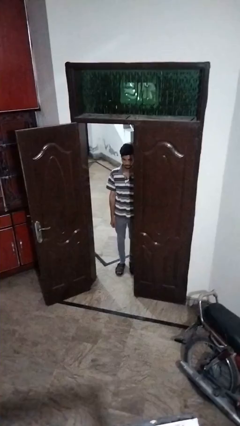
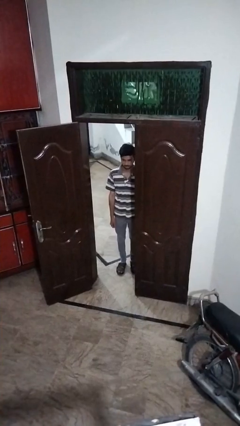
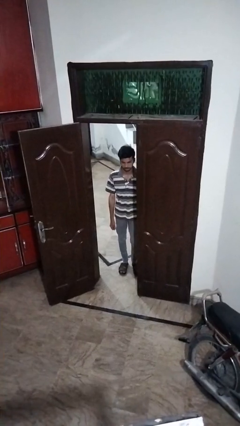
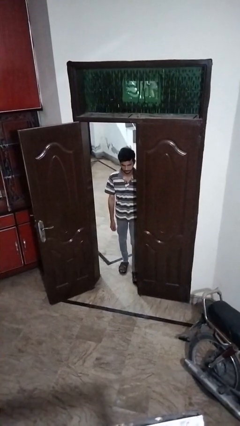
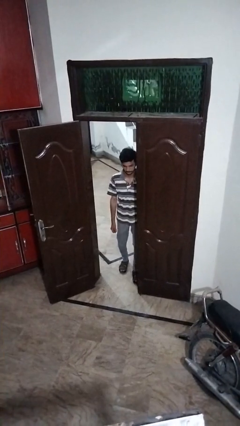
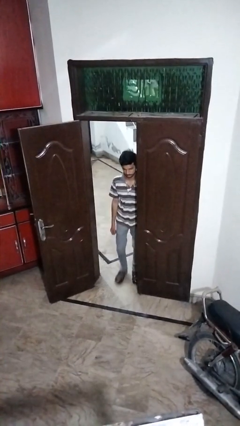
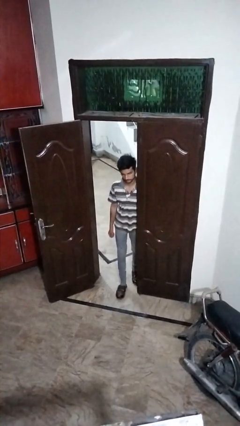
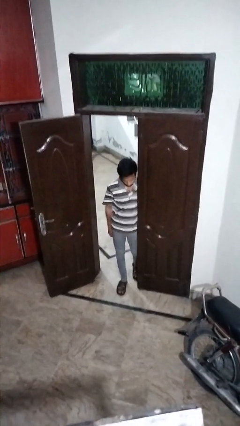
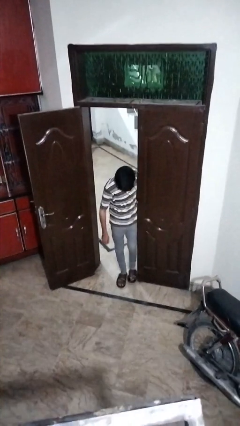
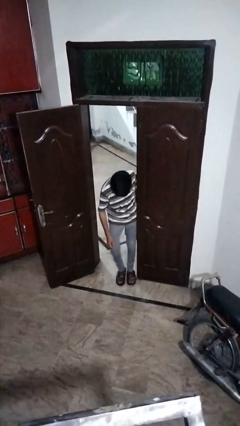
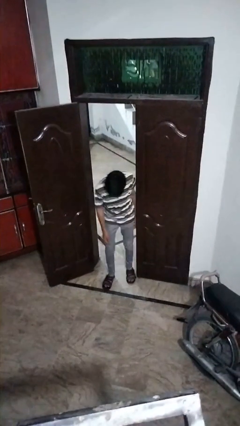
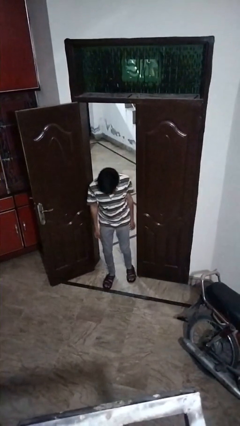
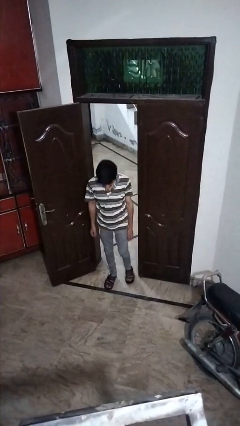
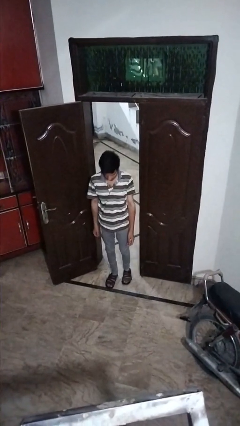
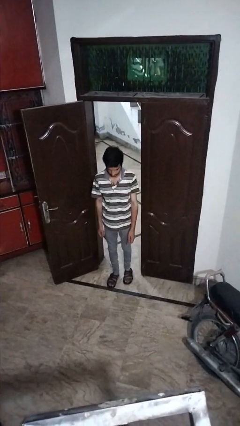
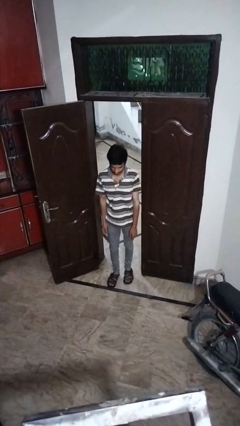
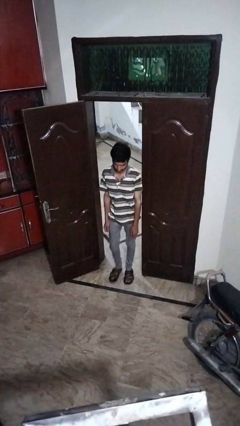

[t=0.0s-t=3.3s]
person bumps into wall

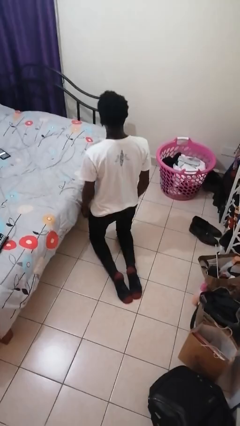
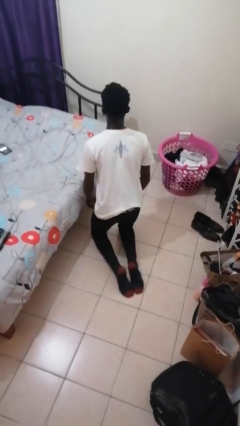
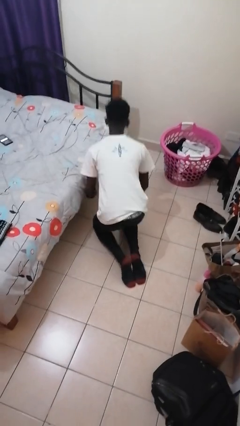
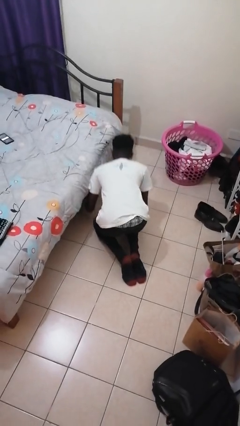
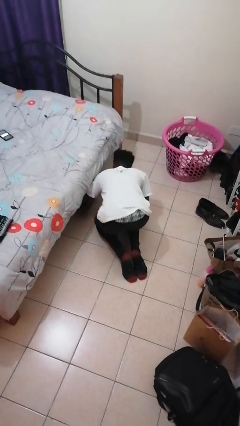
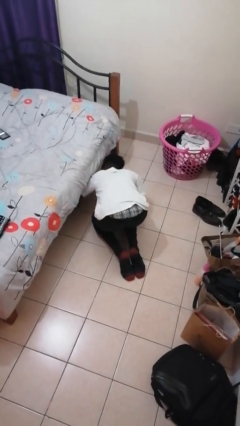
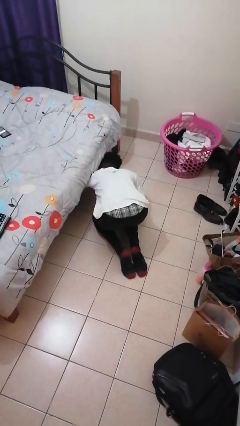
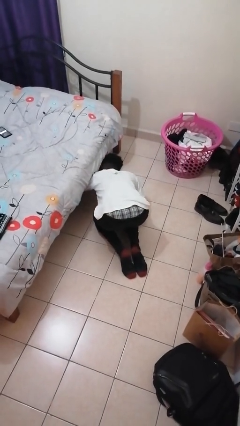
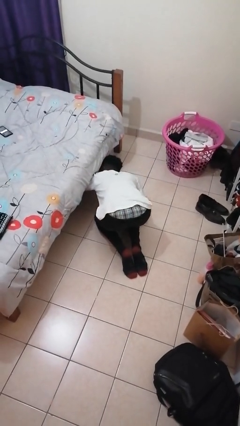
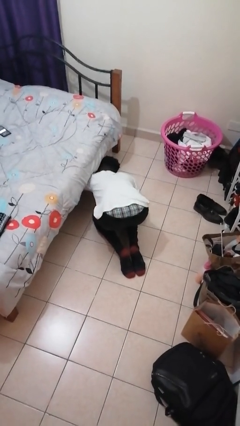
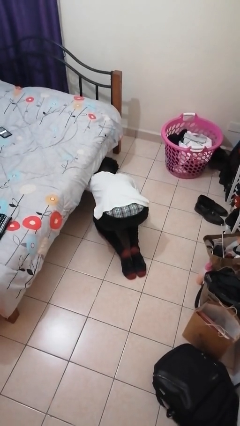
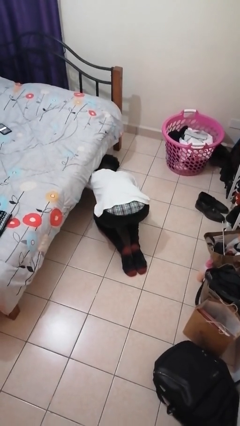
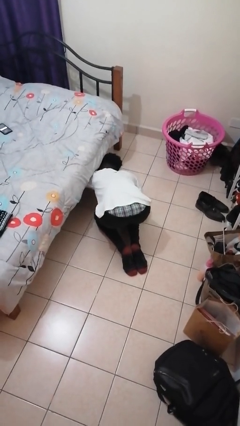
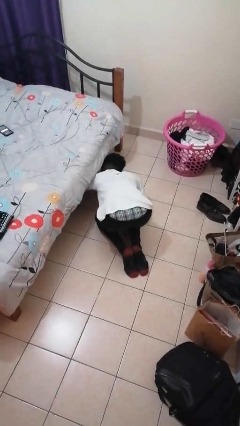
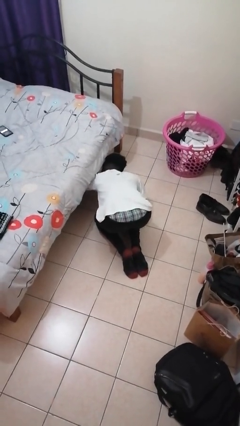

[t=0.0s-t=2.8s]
person searches under bed

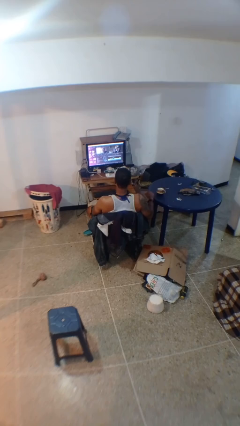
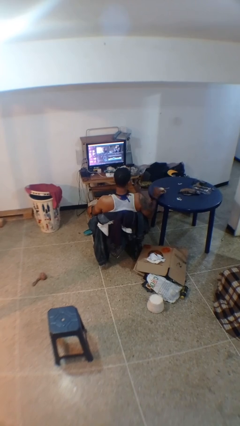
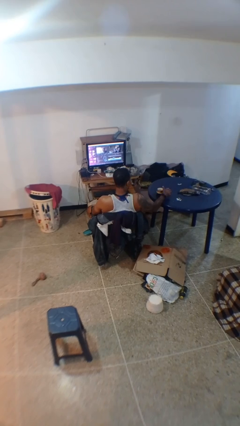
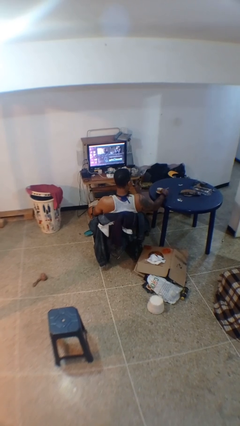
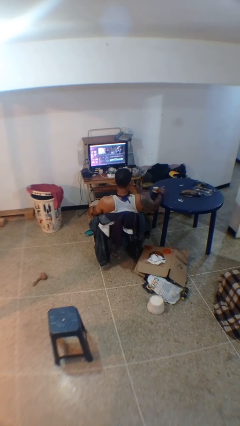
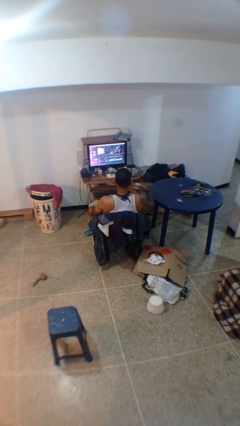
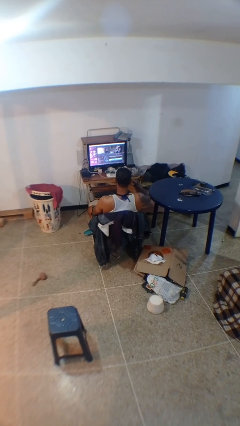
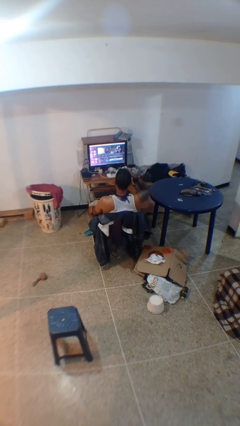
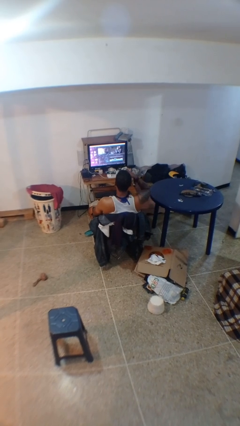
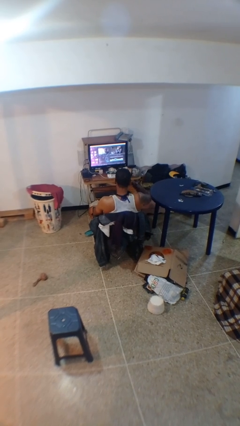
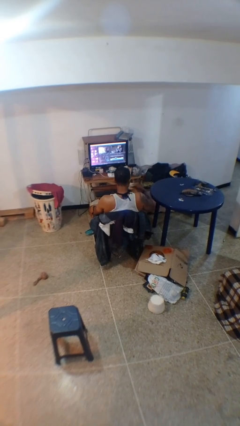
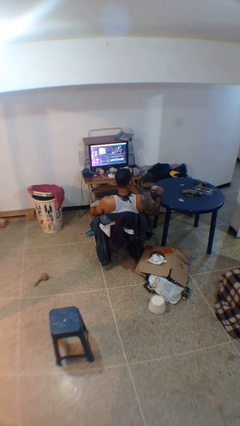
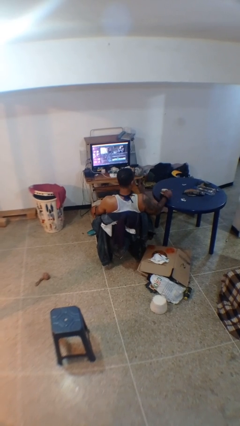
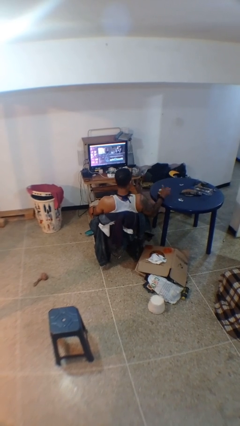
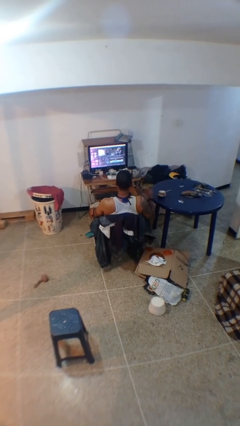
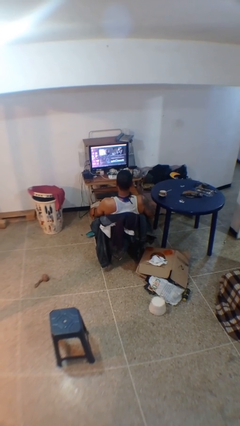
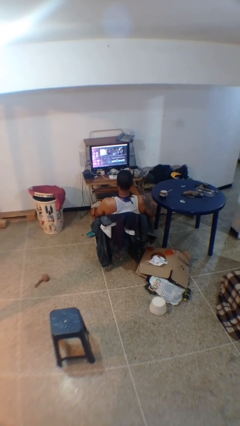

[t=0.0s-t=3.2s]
person drinks from mug

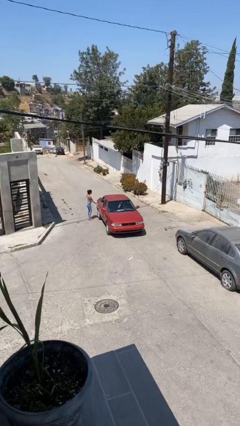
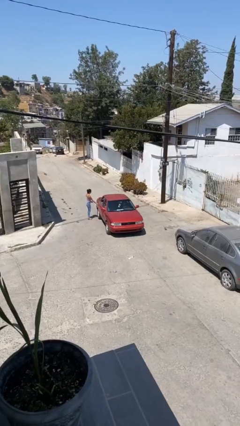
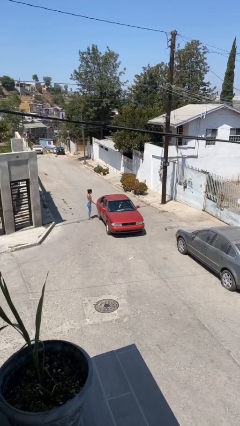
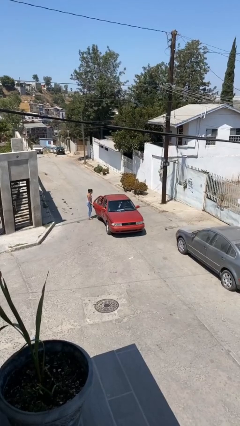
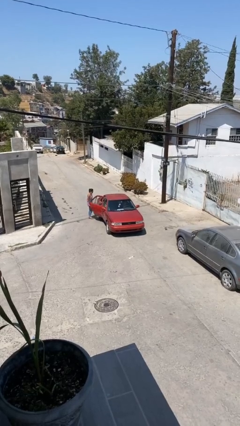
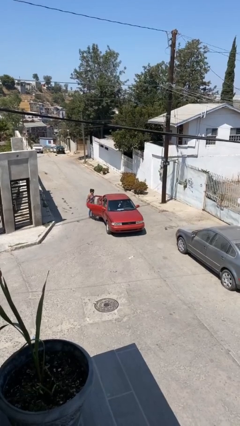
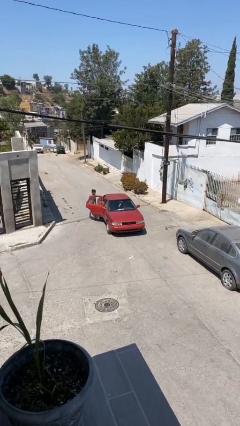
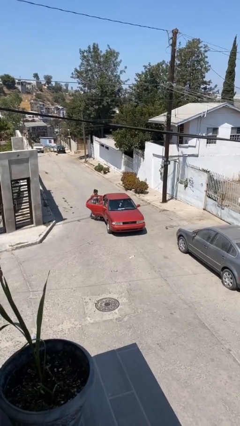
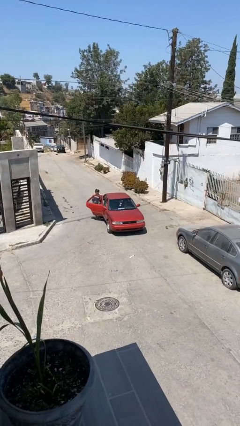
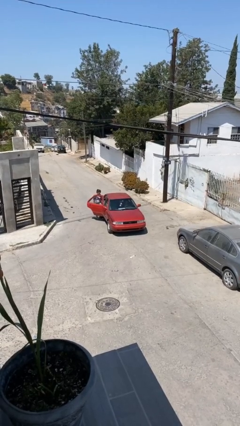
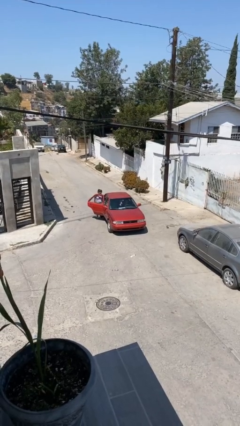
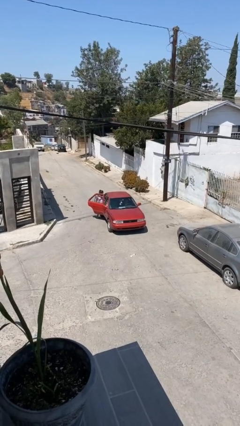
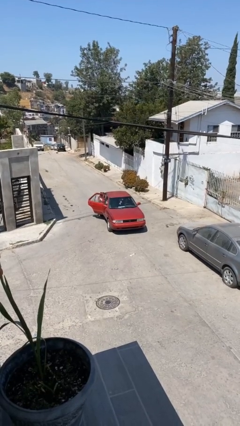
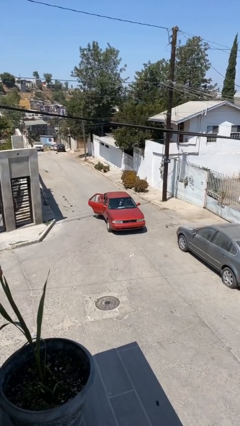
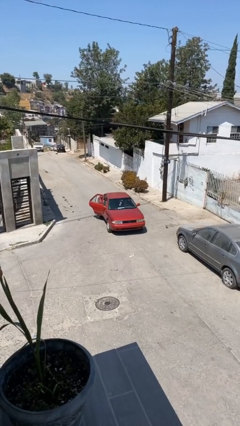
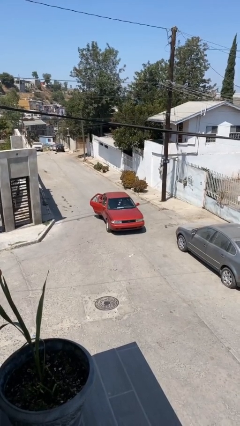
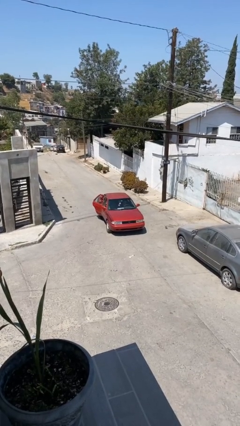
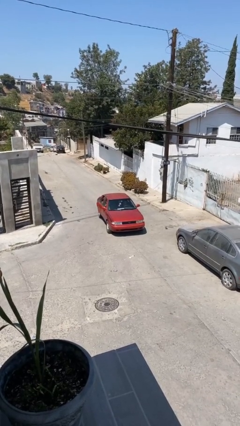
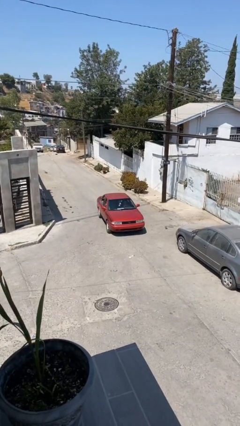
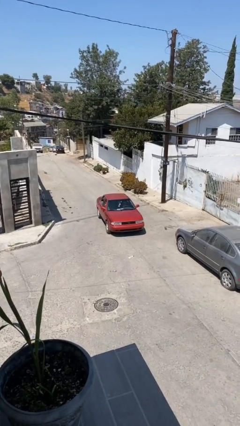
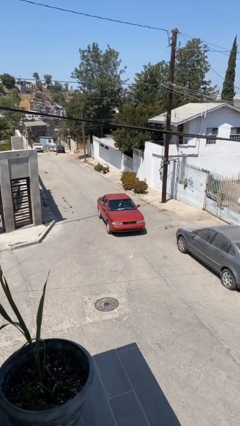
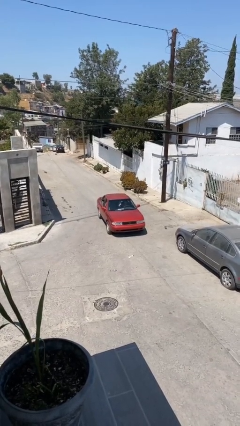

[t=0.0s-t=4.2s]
car picks up person

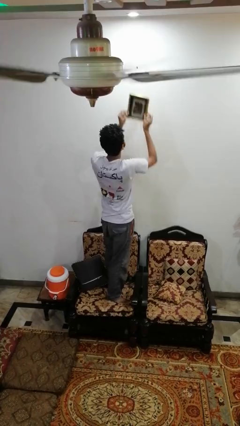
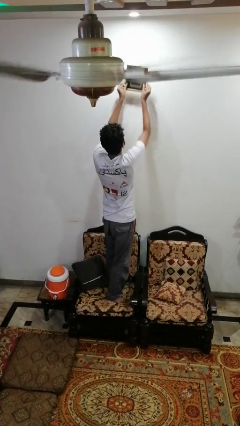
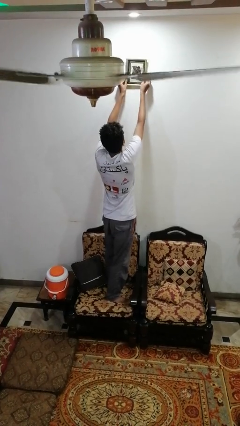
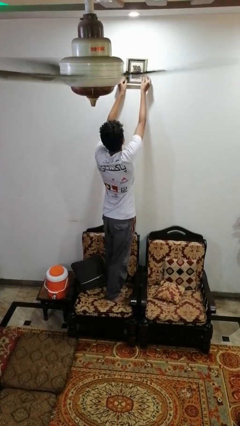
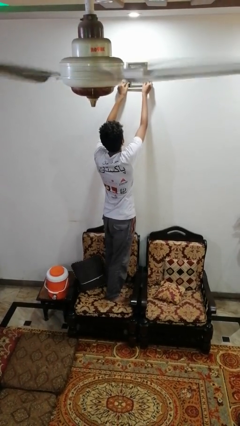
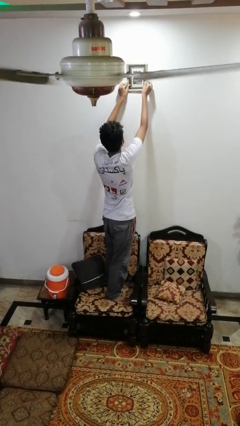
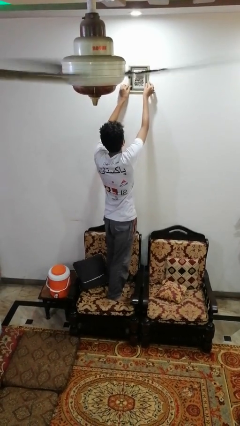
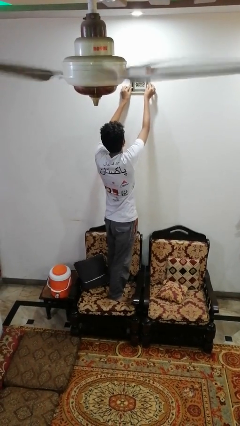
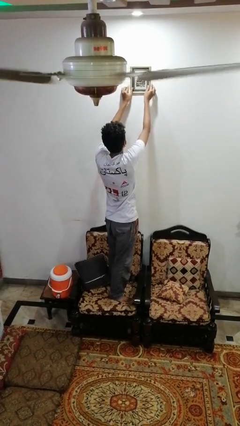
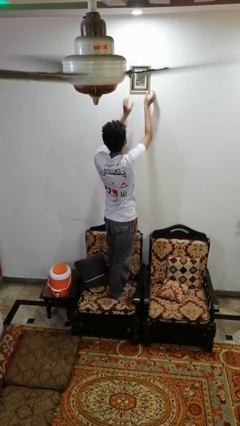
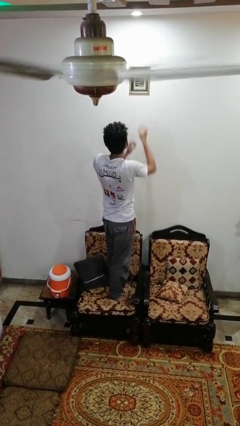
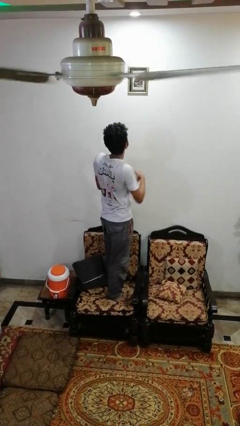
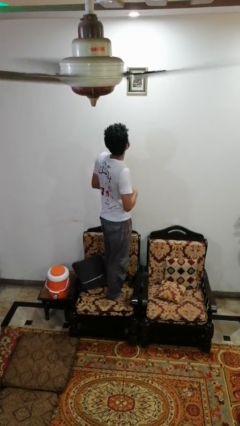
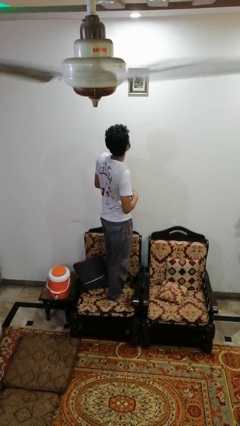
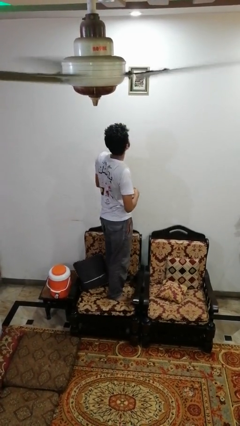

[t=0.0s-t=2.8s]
person puts up picture frame

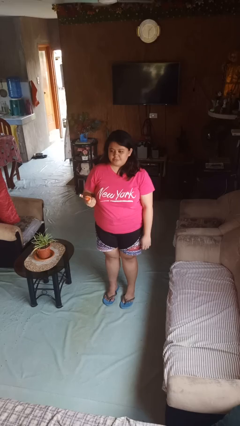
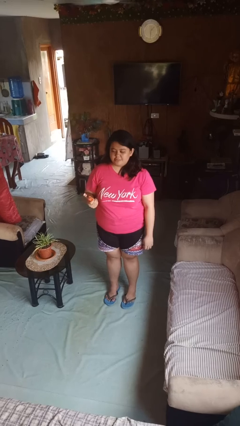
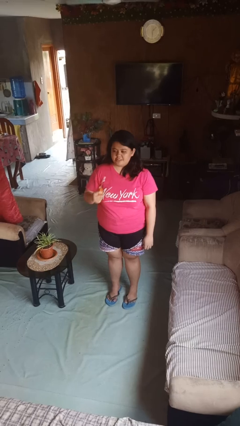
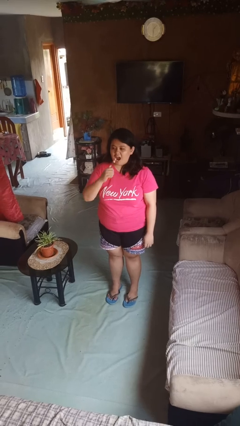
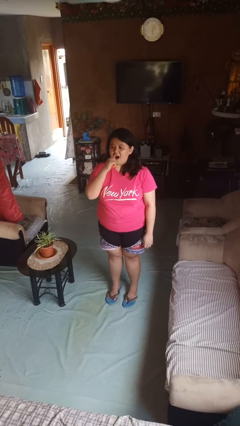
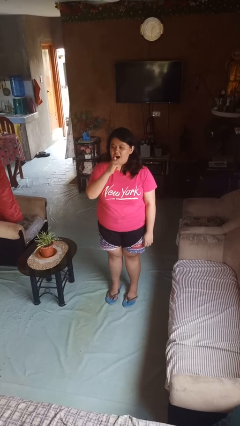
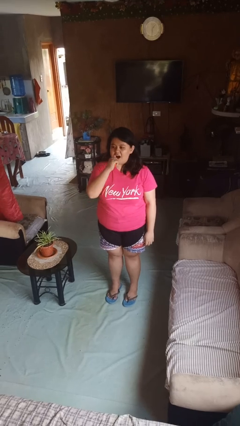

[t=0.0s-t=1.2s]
person brushes teeth

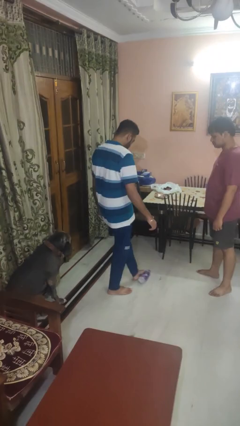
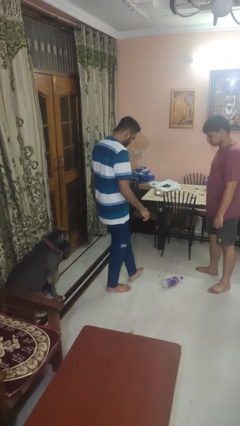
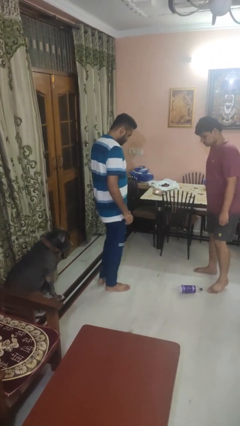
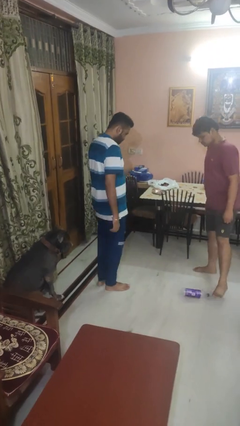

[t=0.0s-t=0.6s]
person kicks object to person
